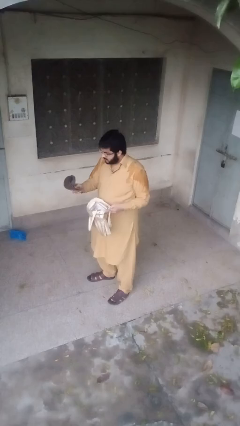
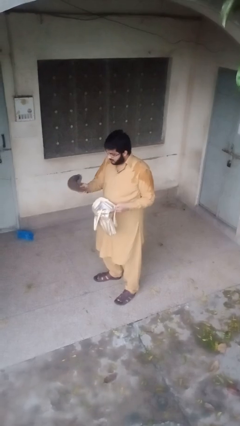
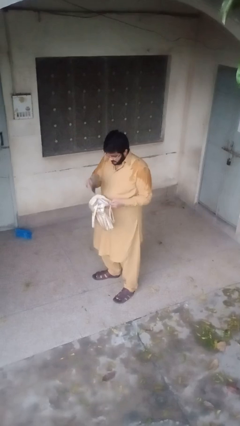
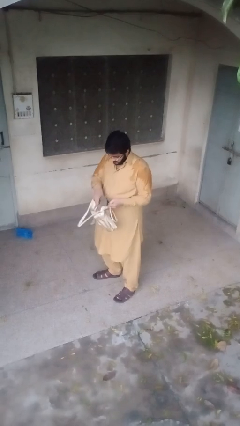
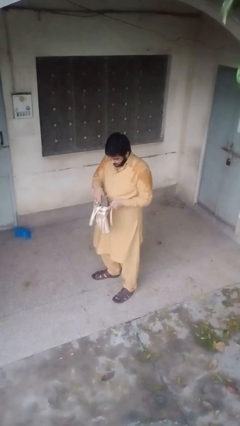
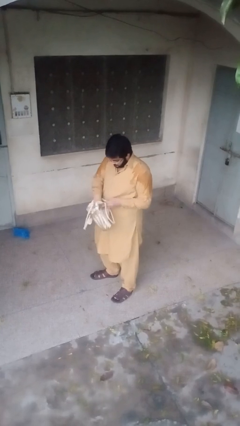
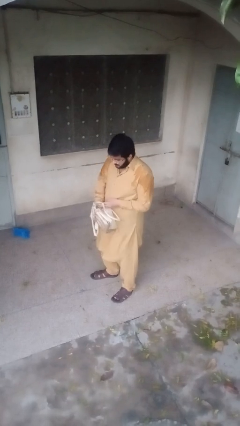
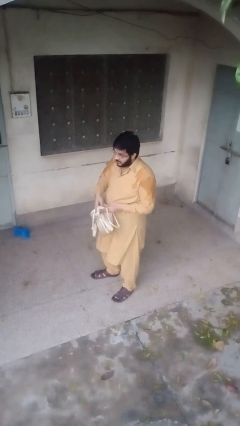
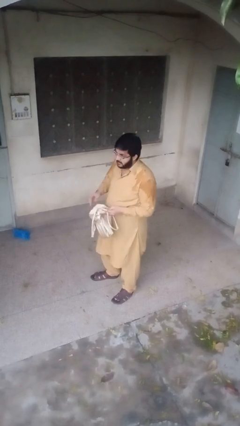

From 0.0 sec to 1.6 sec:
person puts object into purse

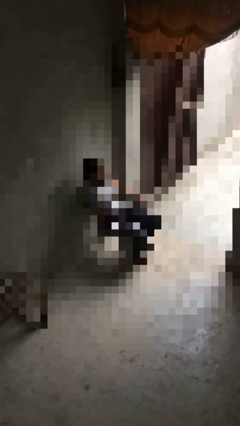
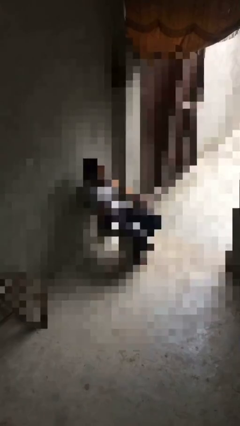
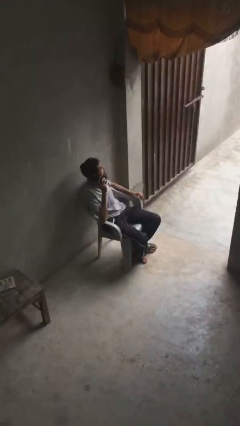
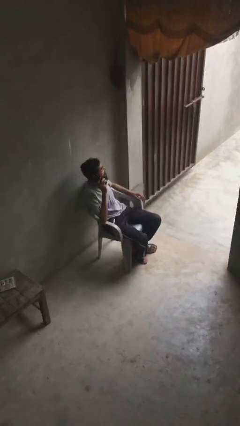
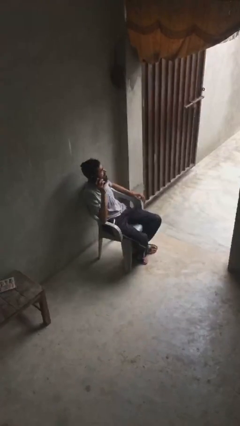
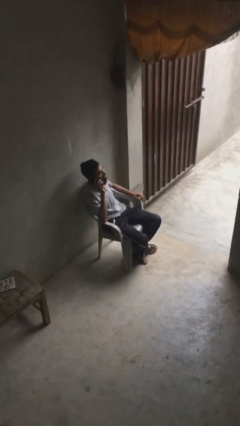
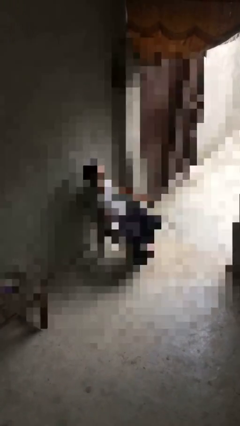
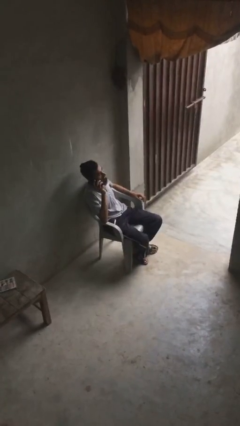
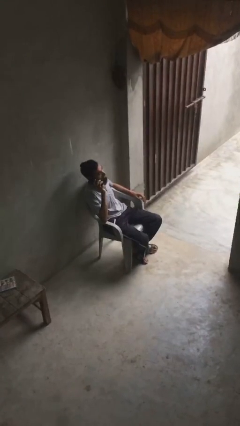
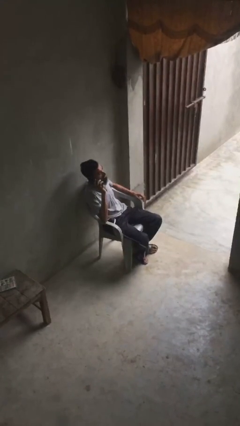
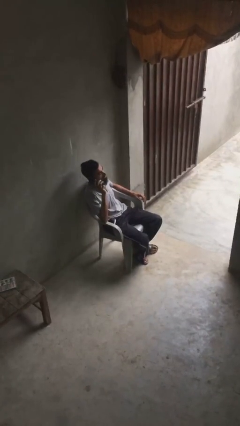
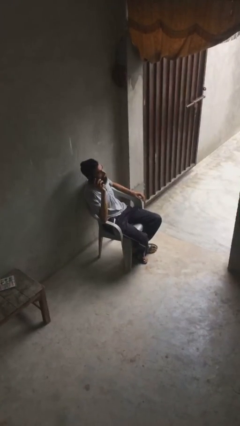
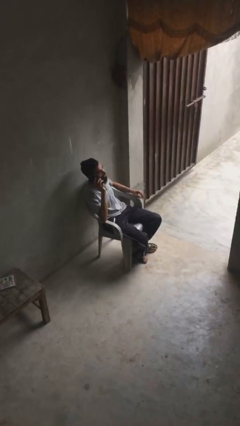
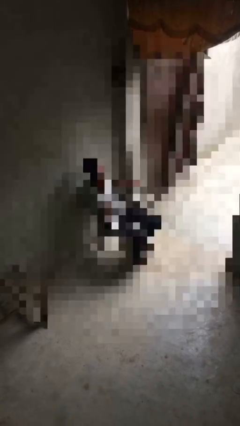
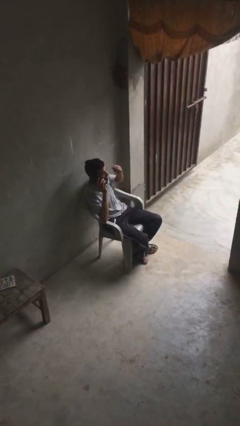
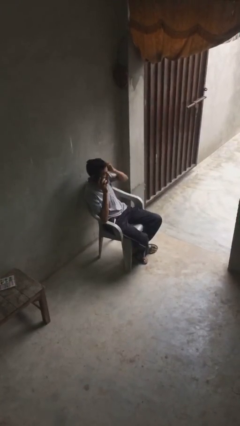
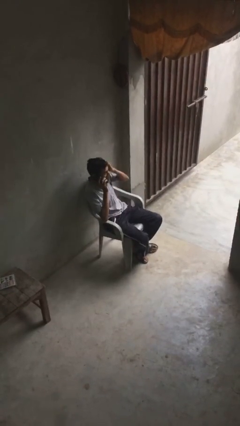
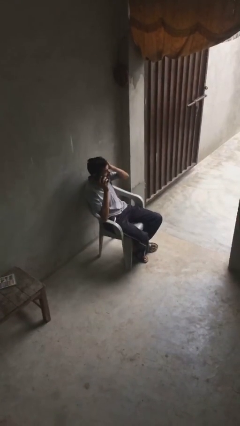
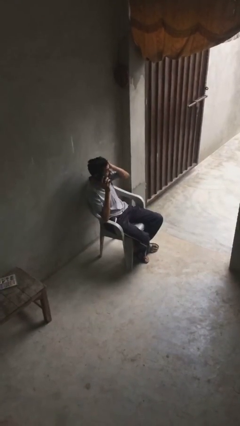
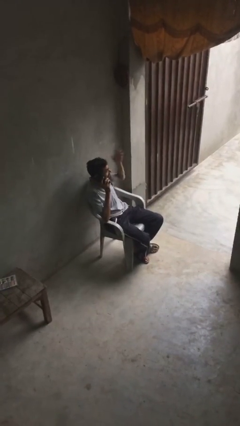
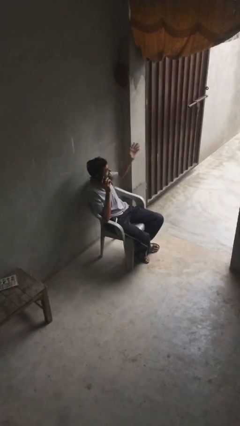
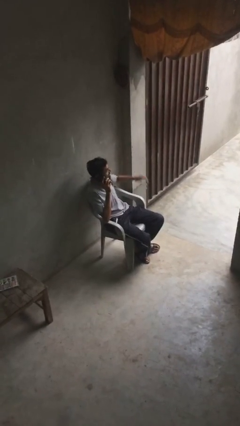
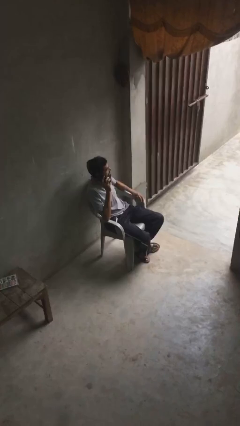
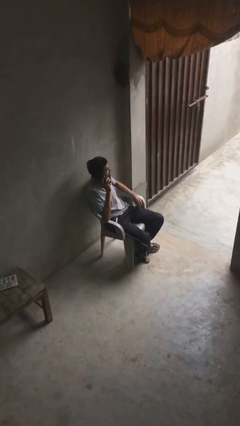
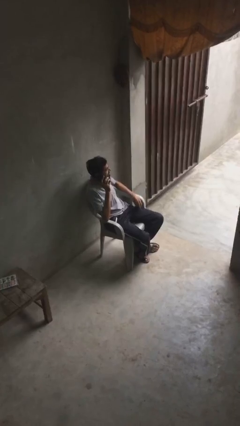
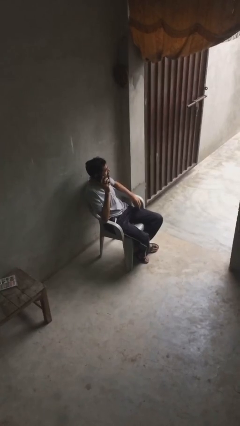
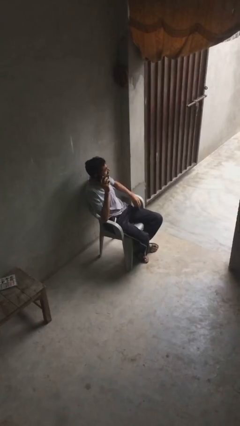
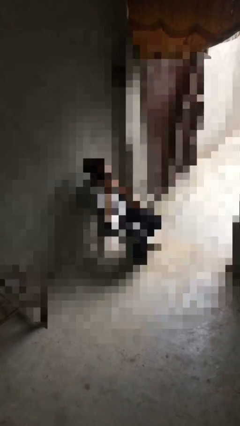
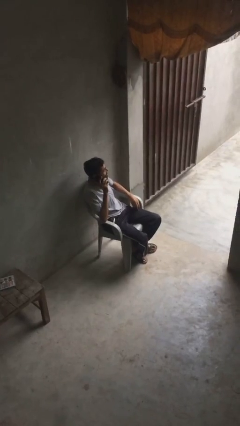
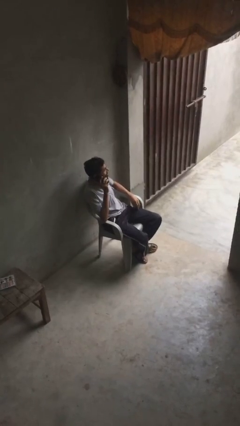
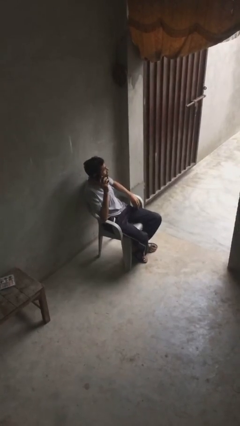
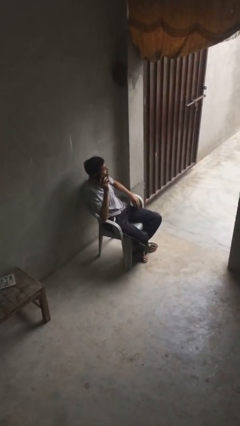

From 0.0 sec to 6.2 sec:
person talks on phone

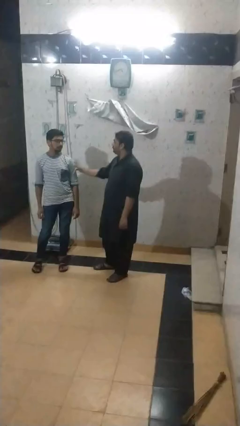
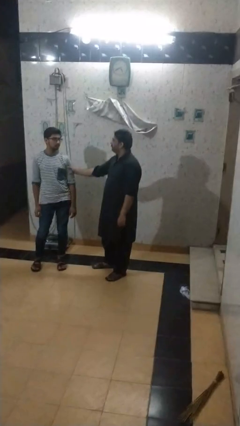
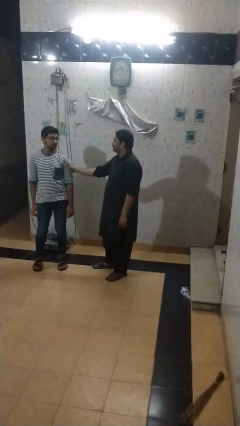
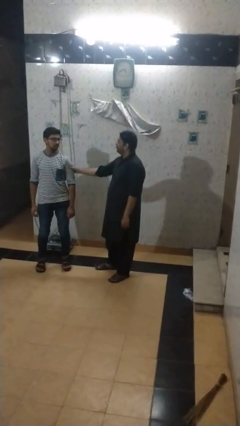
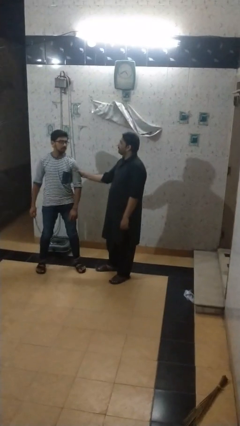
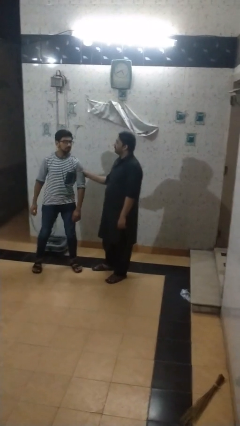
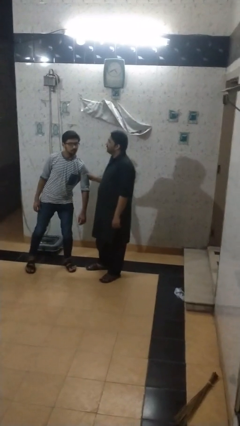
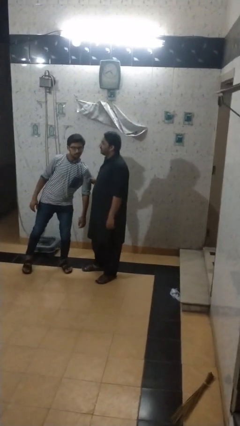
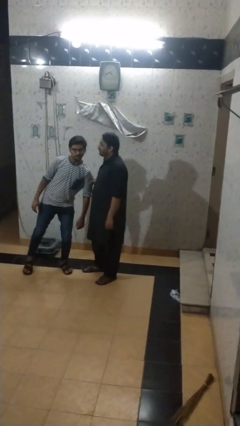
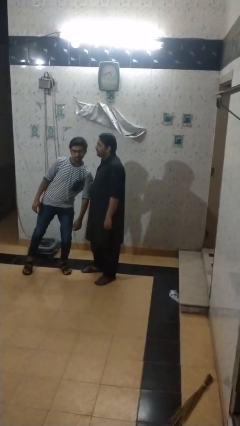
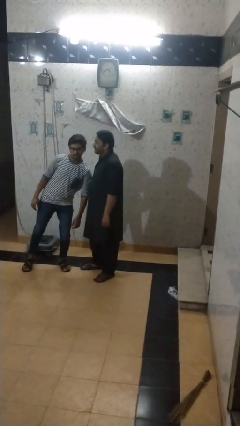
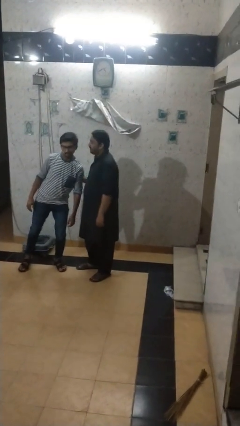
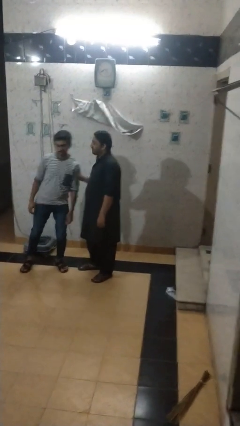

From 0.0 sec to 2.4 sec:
person grabs person by bicep

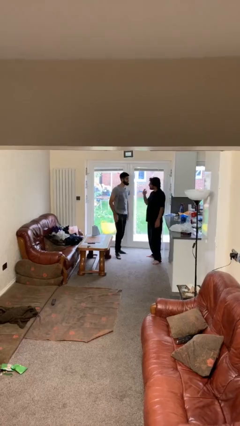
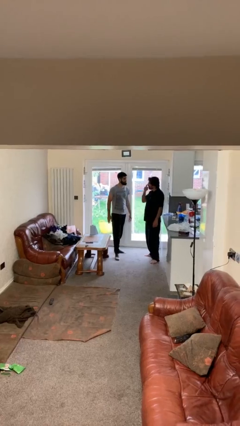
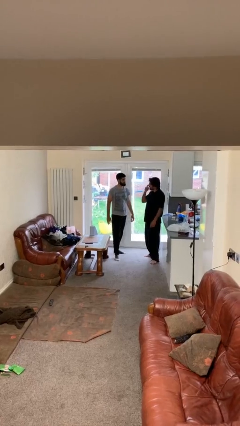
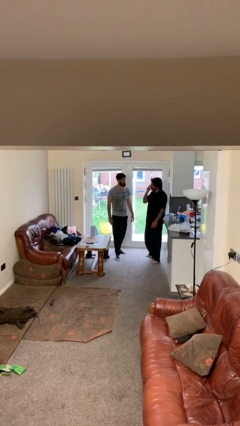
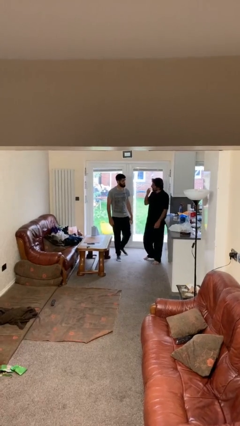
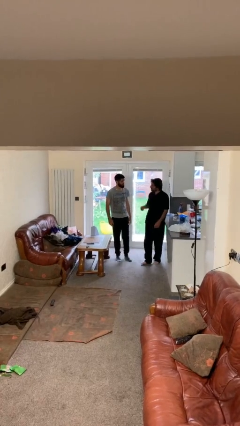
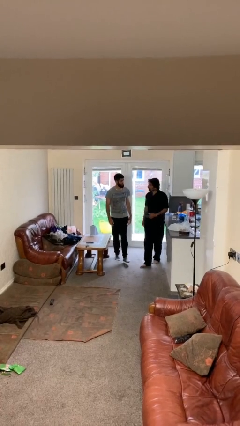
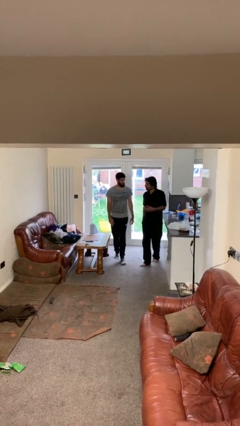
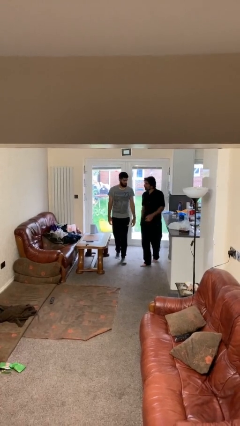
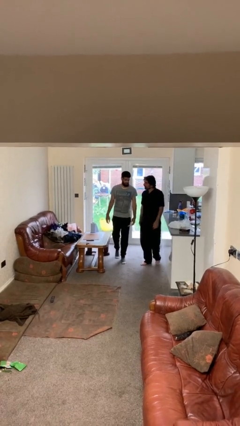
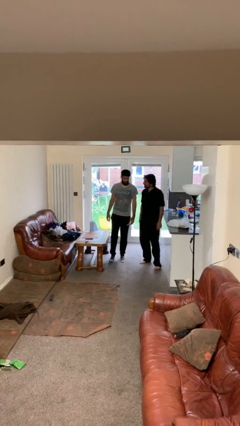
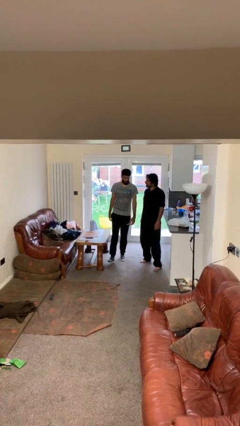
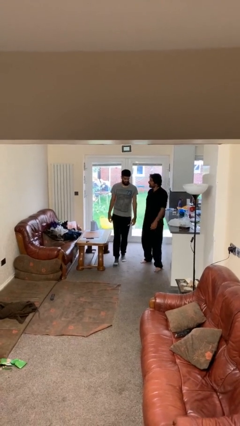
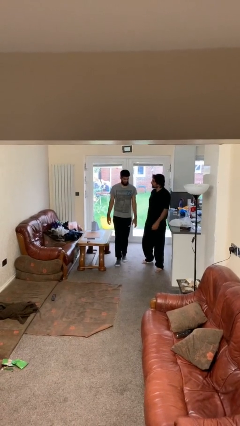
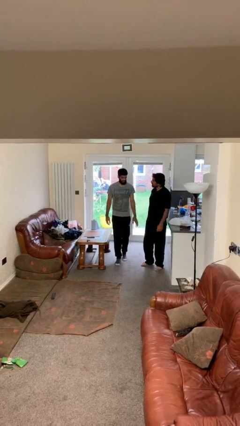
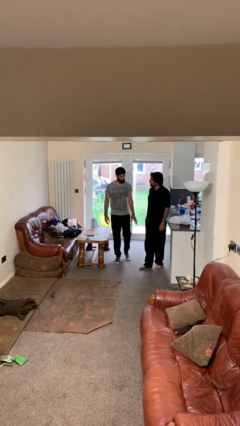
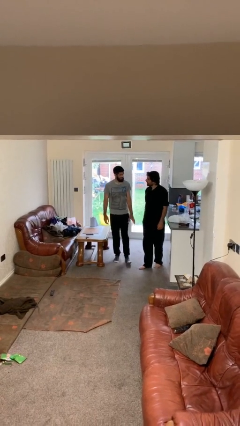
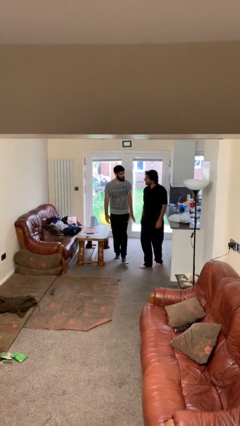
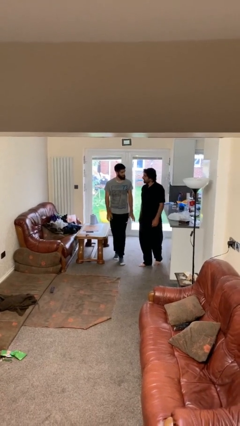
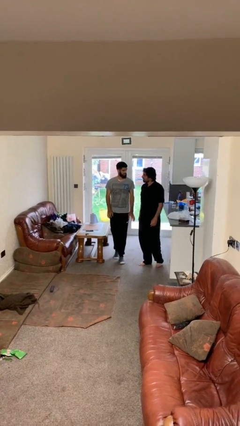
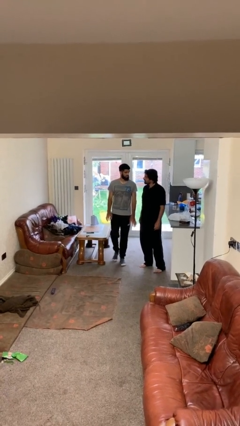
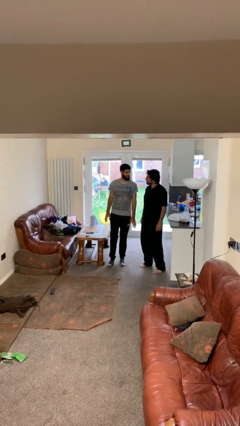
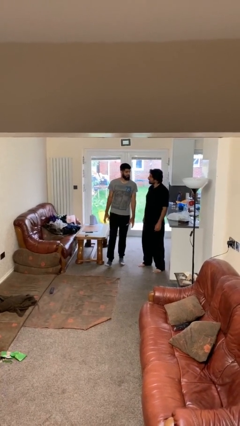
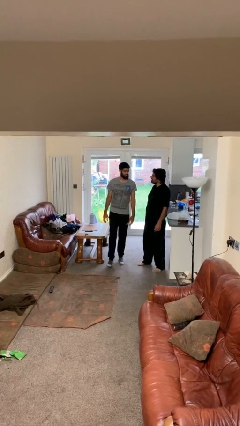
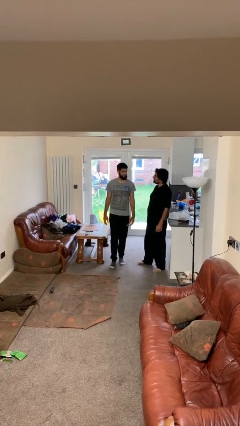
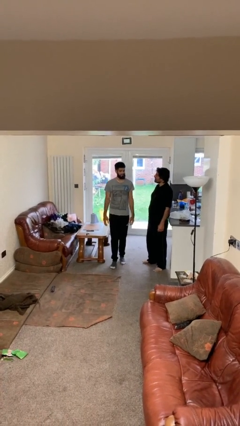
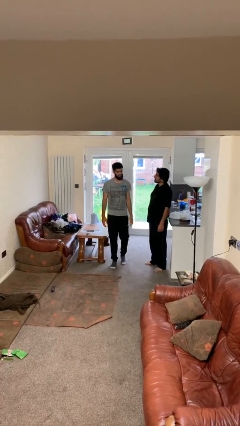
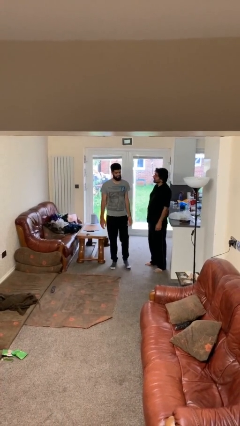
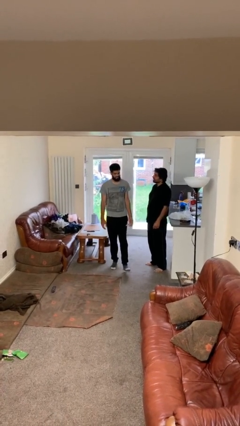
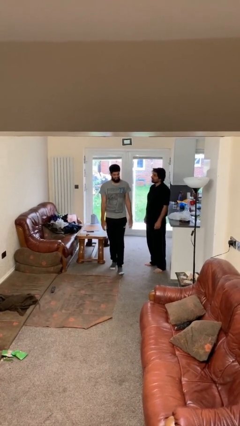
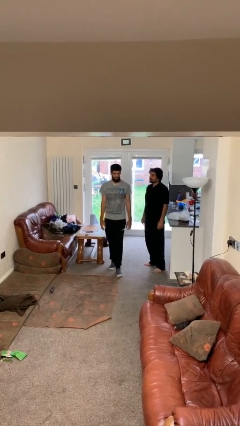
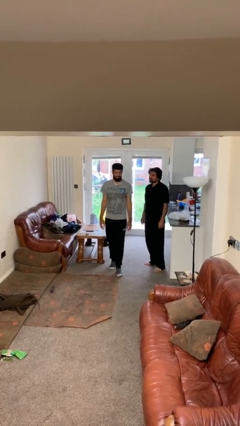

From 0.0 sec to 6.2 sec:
person talks to person

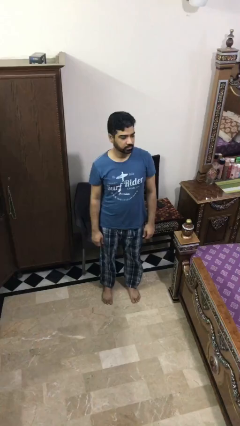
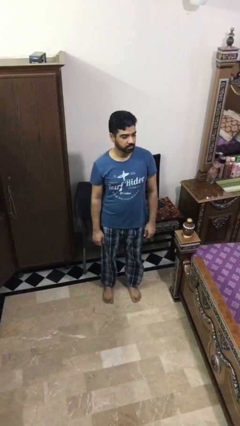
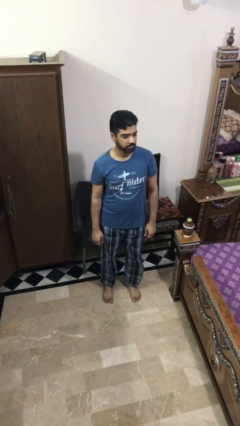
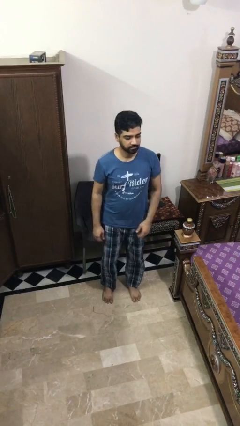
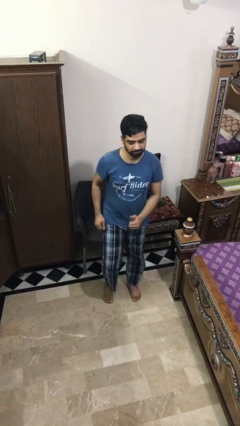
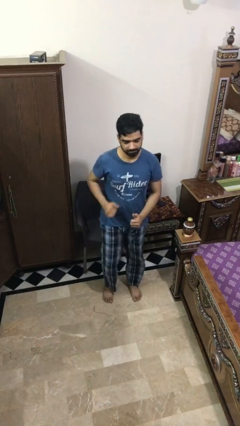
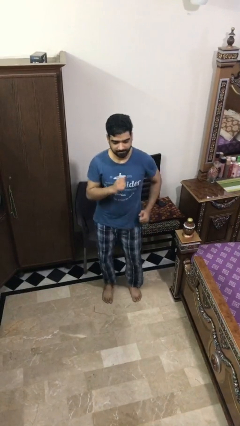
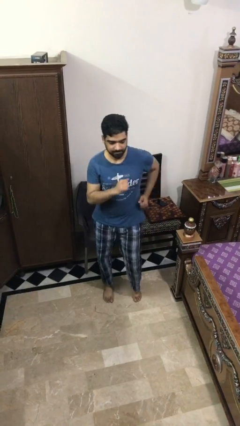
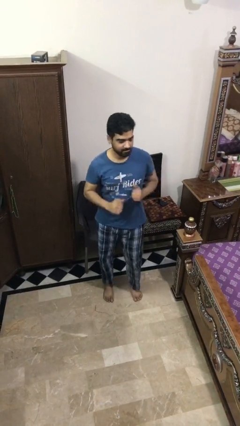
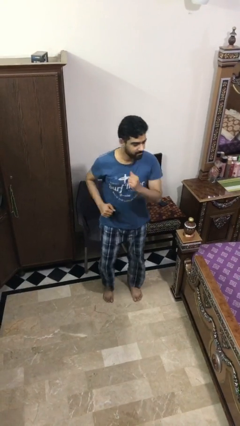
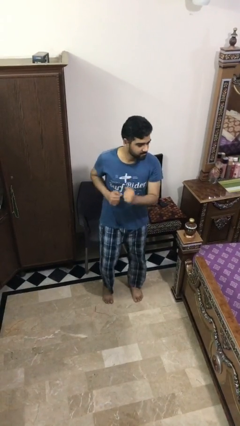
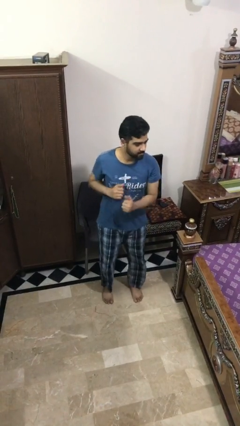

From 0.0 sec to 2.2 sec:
person dances in place
